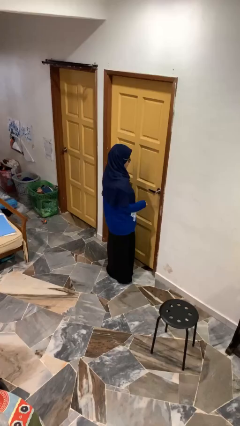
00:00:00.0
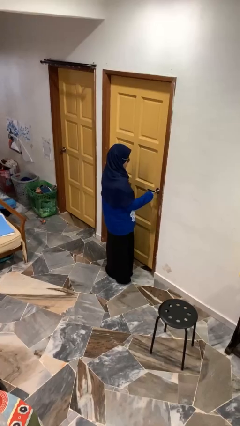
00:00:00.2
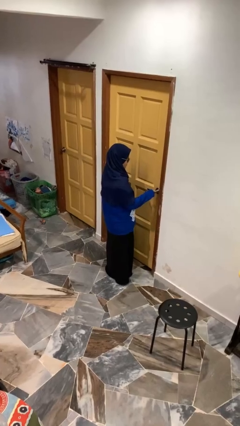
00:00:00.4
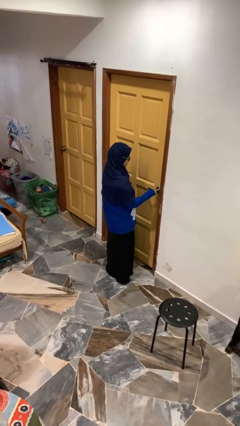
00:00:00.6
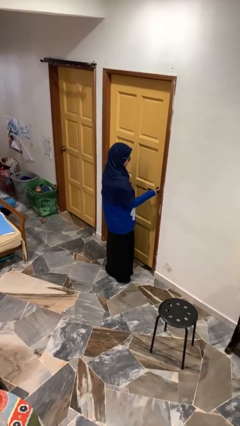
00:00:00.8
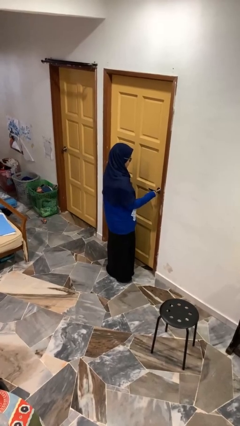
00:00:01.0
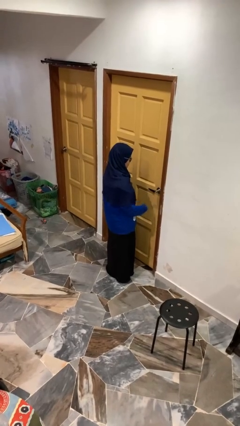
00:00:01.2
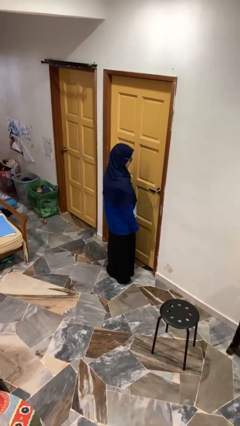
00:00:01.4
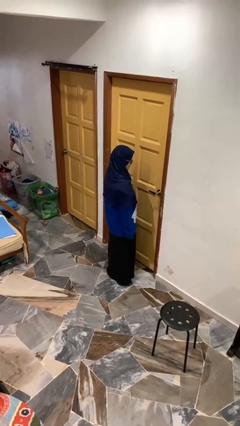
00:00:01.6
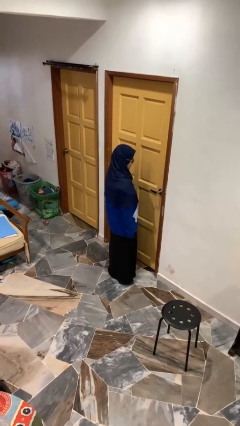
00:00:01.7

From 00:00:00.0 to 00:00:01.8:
person locks door with keys

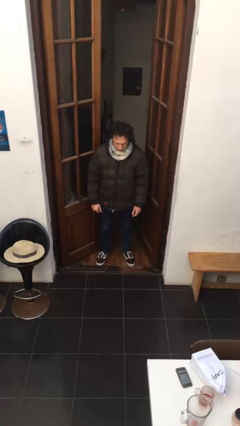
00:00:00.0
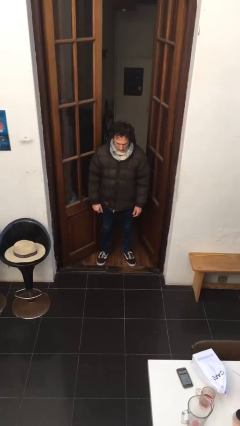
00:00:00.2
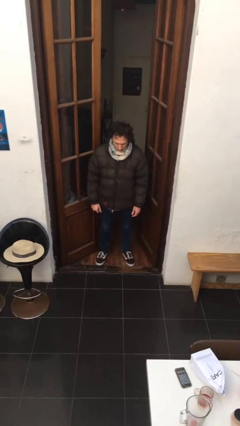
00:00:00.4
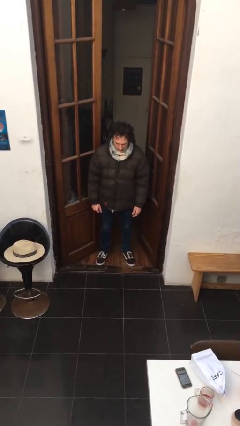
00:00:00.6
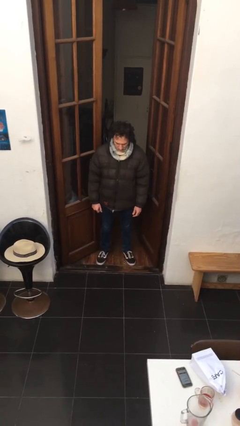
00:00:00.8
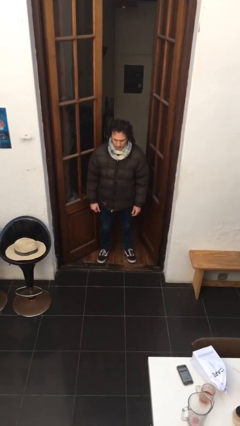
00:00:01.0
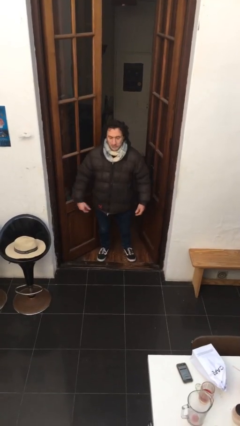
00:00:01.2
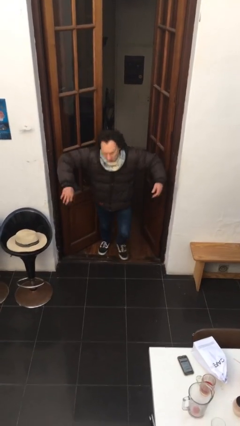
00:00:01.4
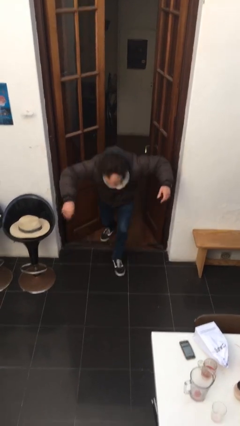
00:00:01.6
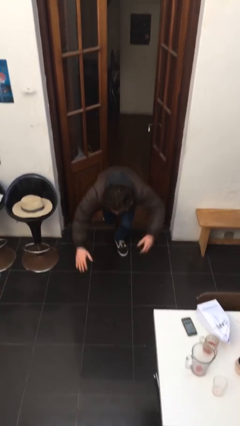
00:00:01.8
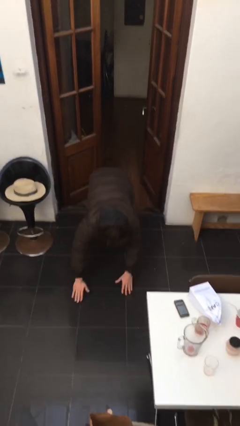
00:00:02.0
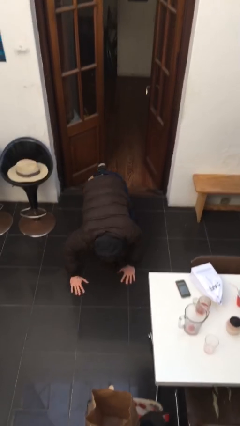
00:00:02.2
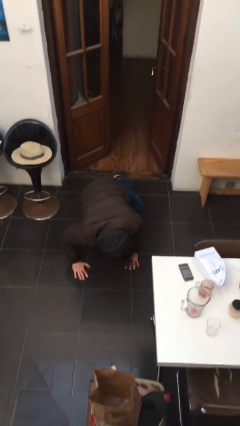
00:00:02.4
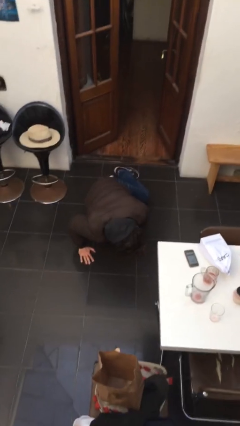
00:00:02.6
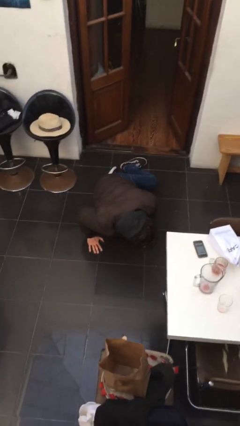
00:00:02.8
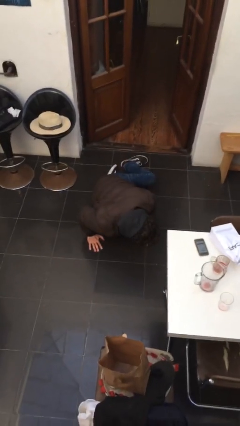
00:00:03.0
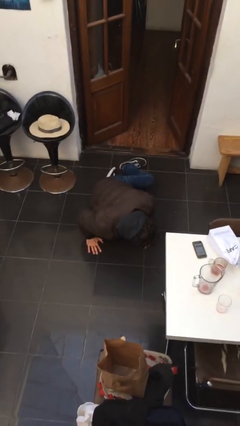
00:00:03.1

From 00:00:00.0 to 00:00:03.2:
person trips on object on floor

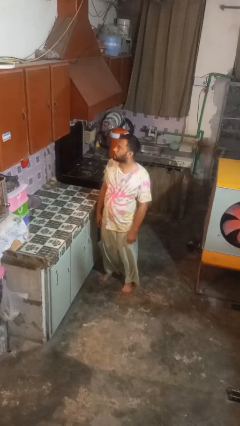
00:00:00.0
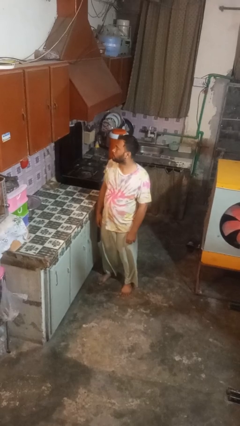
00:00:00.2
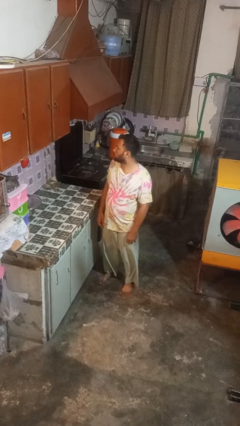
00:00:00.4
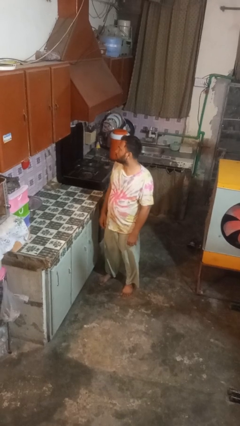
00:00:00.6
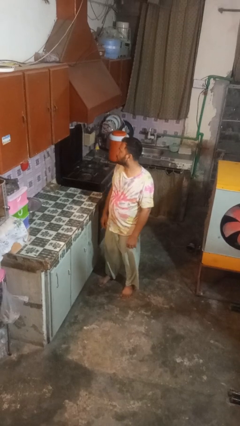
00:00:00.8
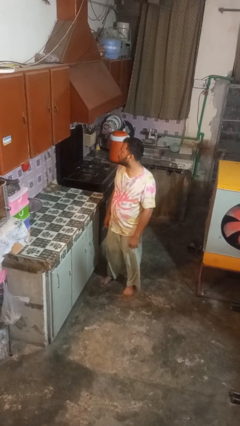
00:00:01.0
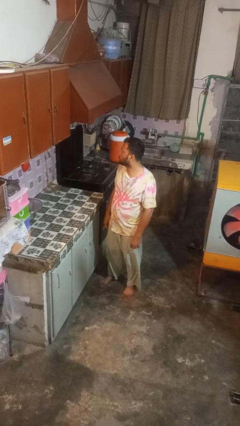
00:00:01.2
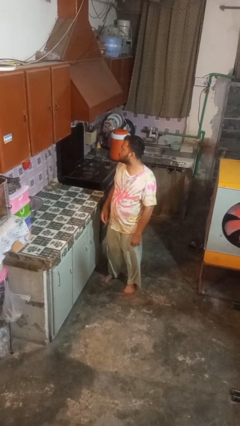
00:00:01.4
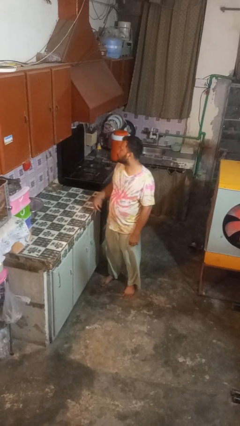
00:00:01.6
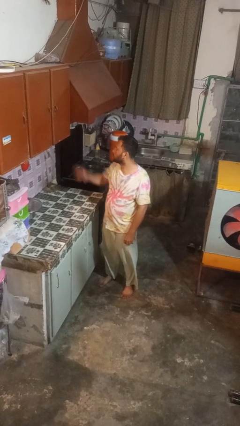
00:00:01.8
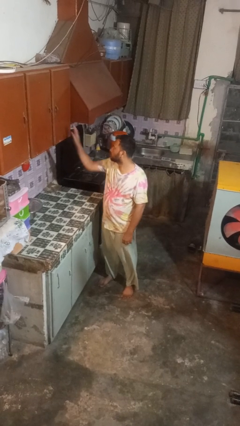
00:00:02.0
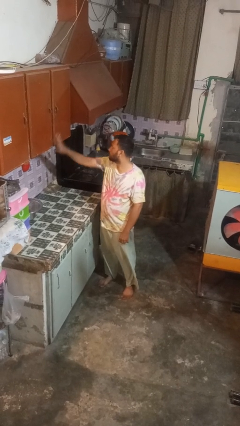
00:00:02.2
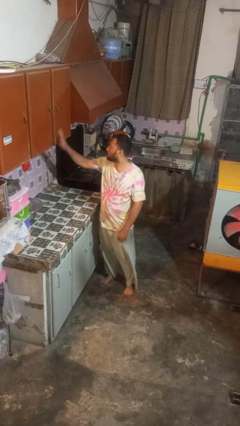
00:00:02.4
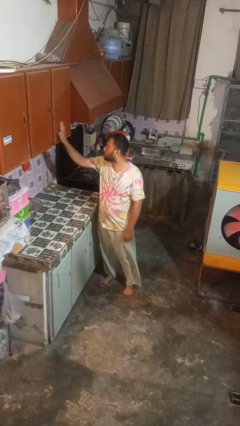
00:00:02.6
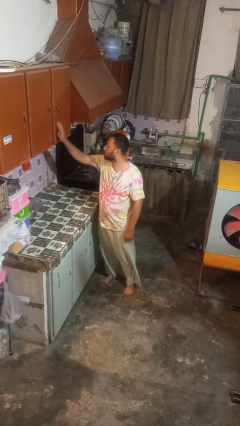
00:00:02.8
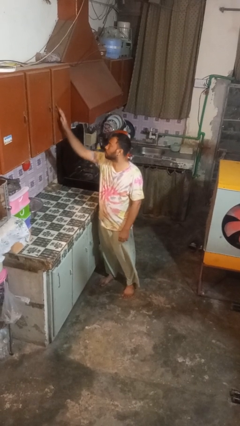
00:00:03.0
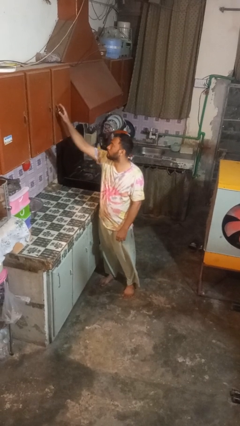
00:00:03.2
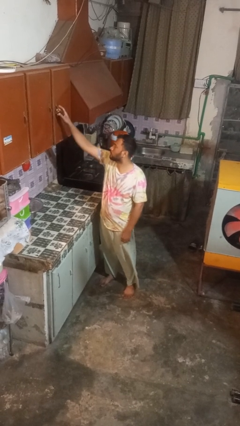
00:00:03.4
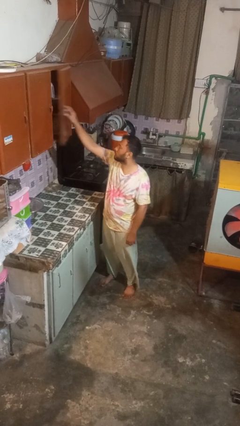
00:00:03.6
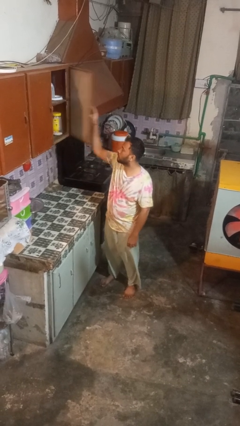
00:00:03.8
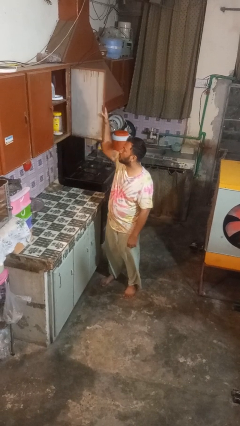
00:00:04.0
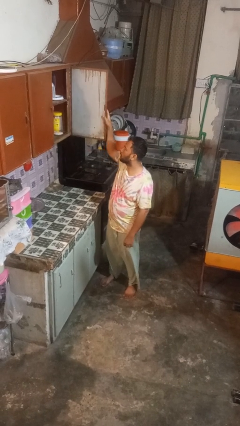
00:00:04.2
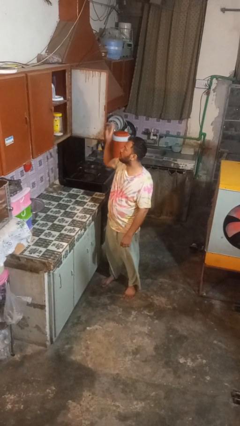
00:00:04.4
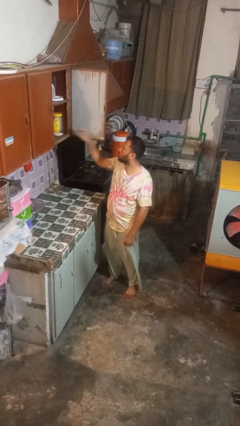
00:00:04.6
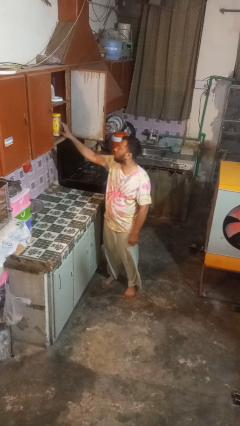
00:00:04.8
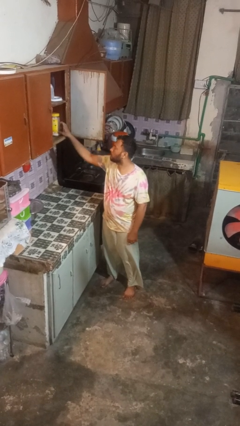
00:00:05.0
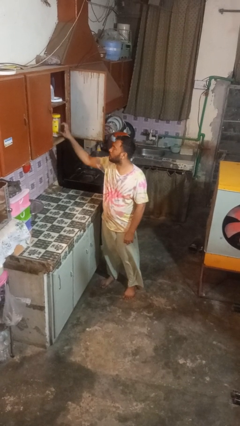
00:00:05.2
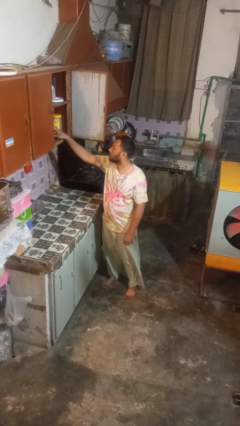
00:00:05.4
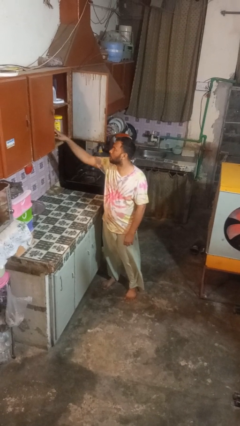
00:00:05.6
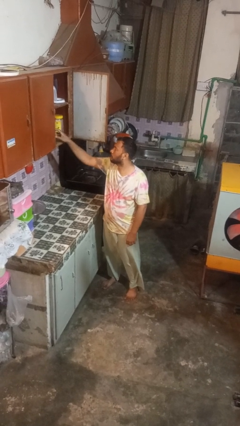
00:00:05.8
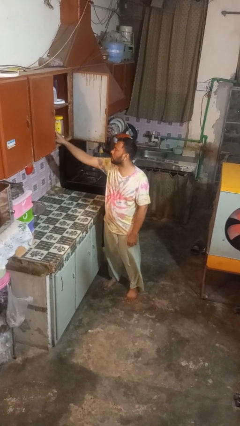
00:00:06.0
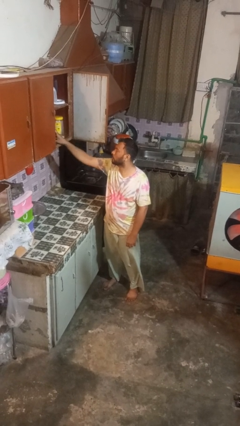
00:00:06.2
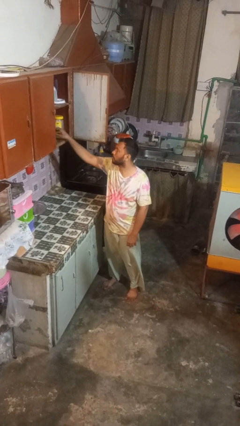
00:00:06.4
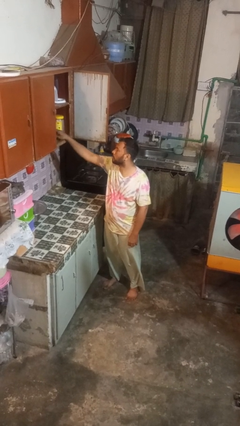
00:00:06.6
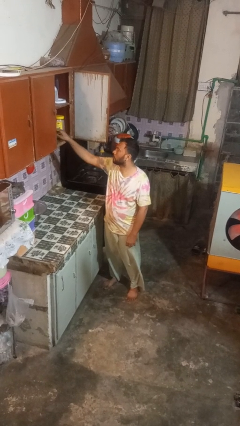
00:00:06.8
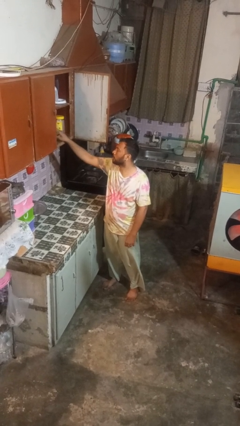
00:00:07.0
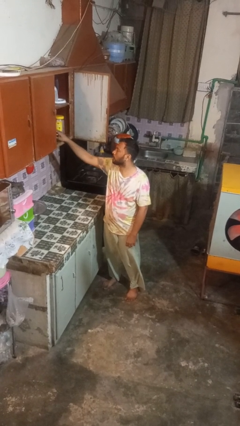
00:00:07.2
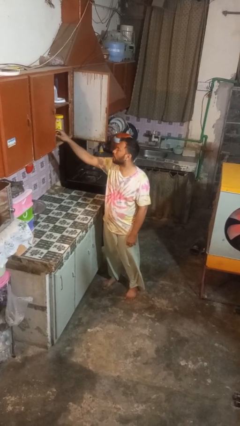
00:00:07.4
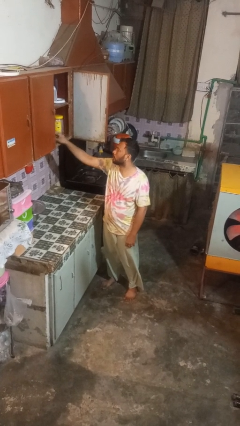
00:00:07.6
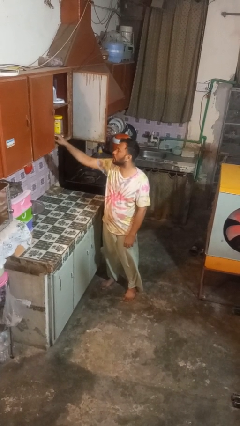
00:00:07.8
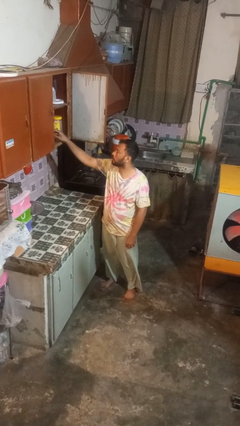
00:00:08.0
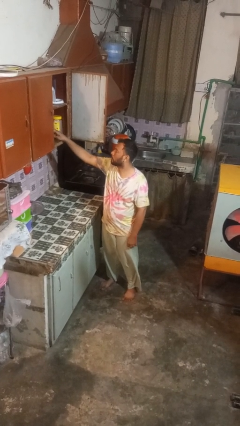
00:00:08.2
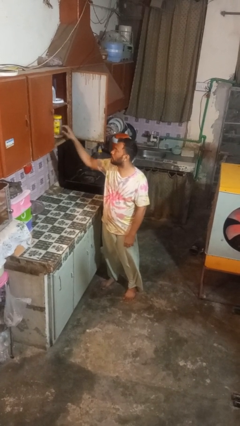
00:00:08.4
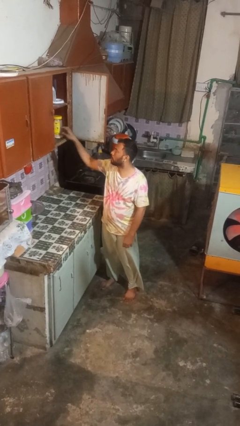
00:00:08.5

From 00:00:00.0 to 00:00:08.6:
person opens cabinet

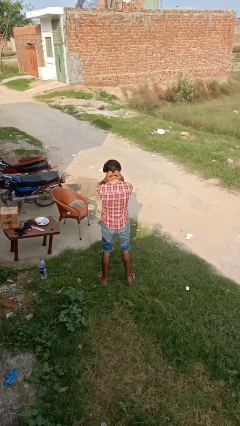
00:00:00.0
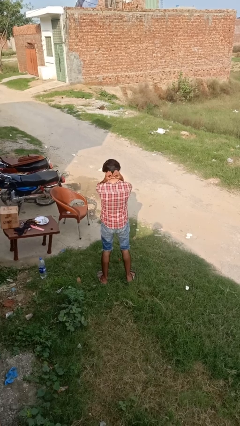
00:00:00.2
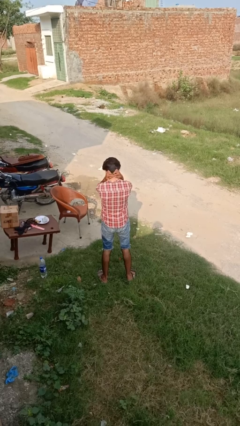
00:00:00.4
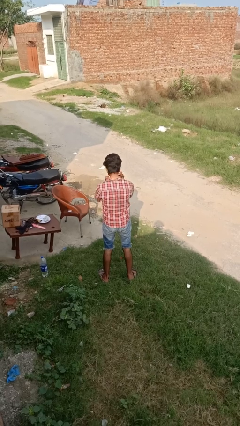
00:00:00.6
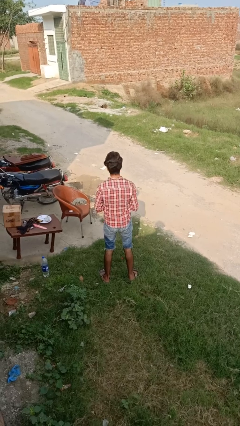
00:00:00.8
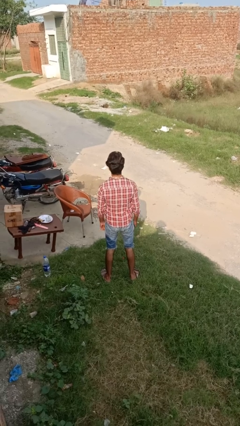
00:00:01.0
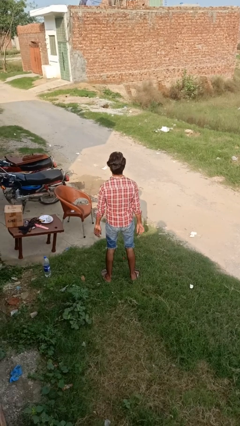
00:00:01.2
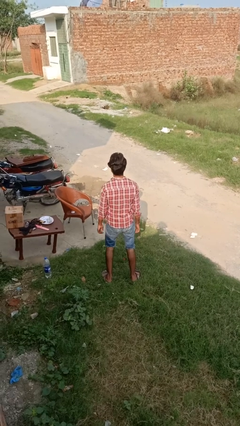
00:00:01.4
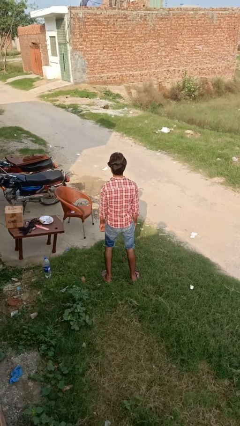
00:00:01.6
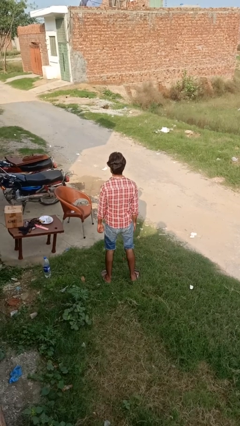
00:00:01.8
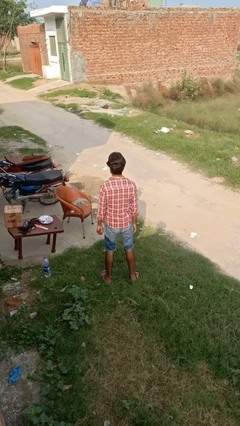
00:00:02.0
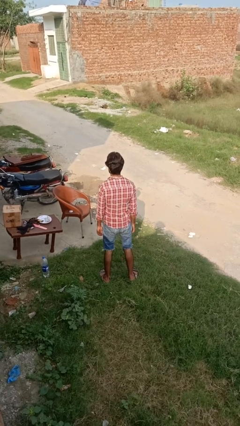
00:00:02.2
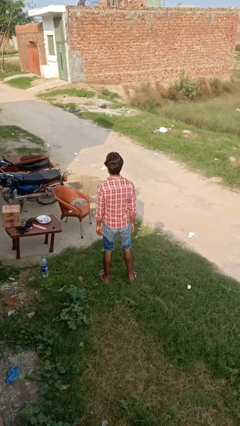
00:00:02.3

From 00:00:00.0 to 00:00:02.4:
person takes off necklace

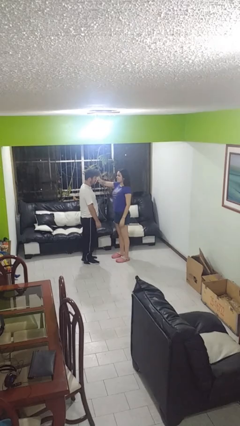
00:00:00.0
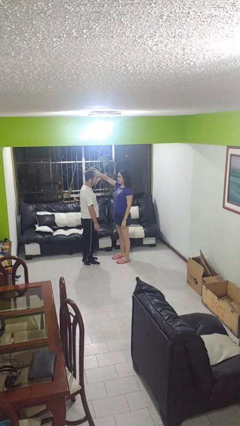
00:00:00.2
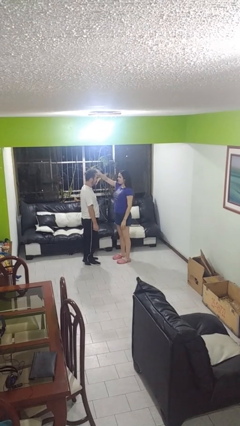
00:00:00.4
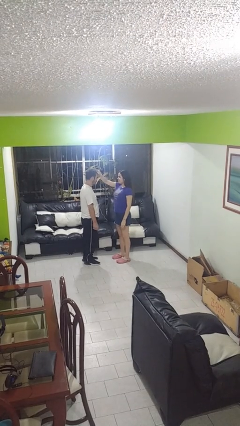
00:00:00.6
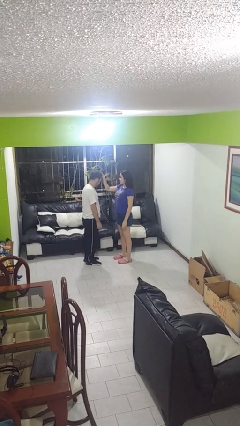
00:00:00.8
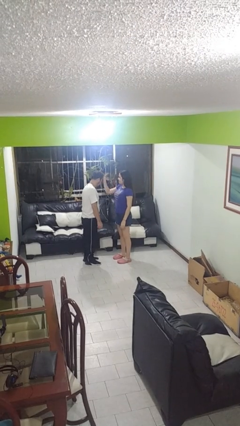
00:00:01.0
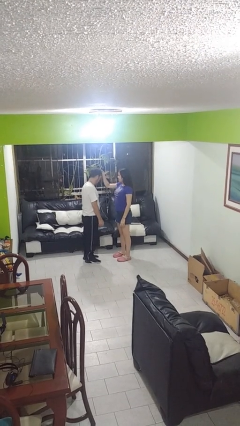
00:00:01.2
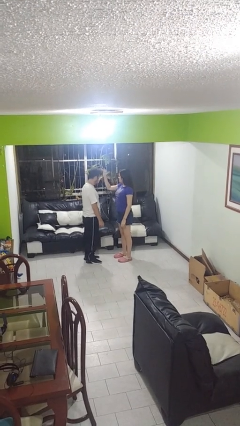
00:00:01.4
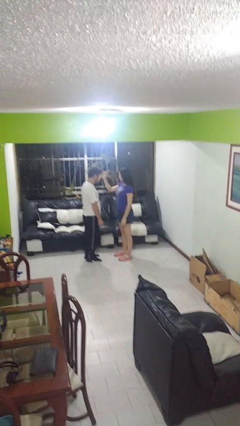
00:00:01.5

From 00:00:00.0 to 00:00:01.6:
person grabs person by hair
